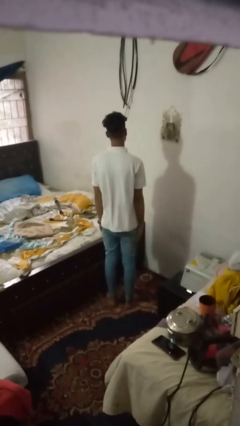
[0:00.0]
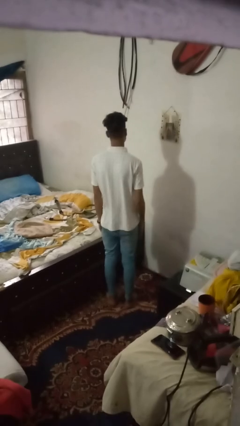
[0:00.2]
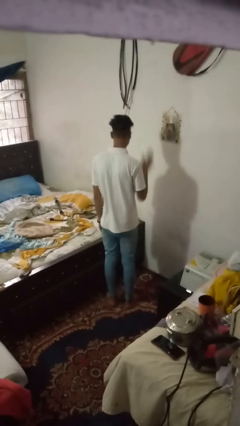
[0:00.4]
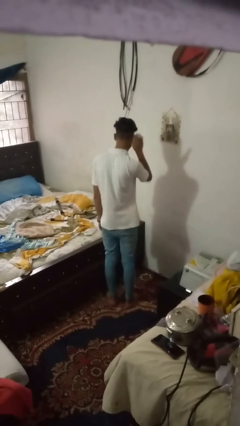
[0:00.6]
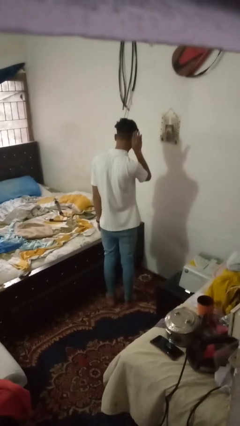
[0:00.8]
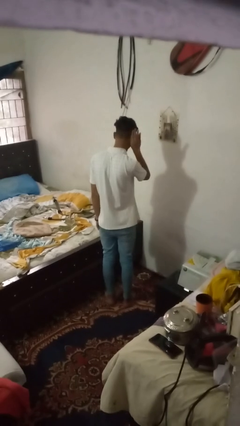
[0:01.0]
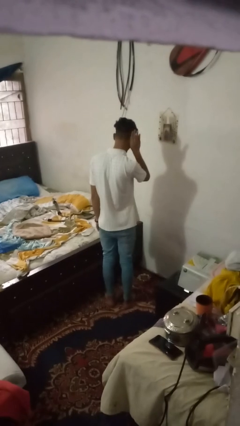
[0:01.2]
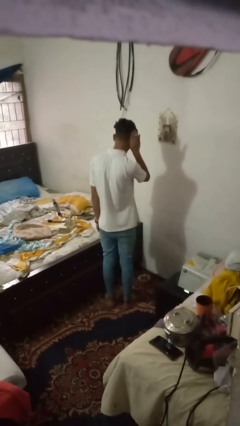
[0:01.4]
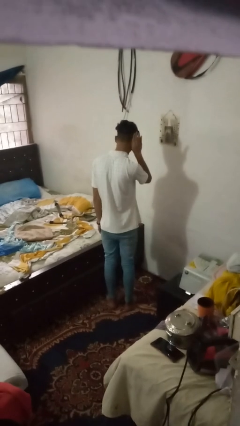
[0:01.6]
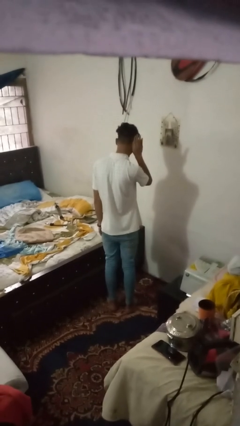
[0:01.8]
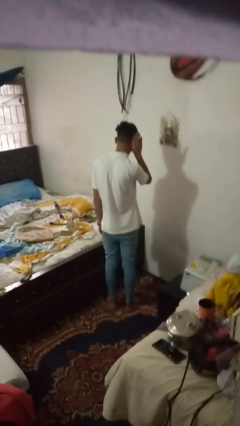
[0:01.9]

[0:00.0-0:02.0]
person gestures listen closely

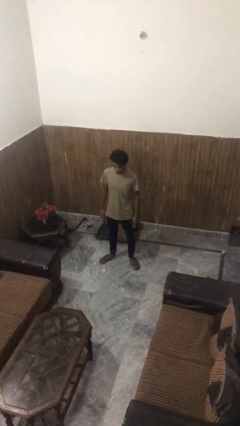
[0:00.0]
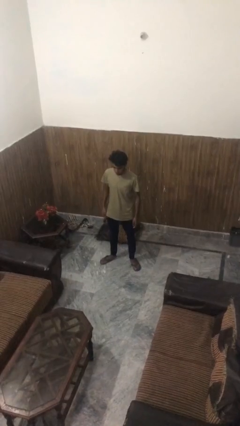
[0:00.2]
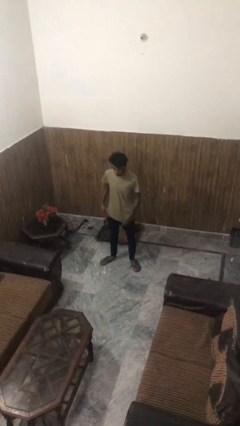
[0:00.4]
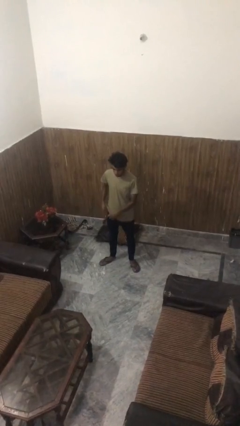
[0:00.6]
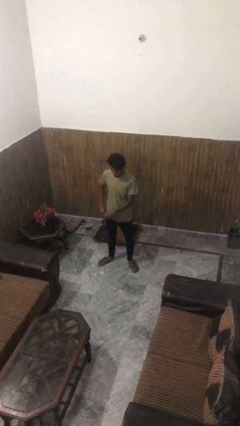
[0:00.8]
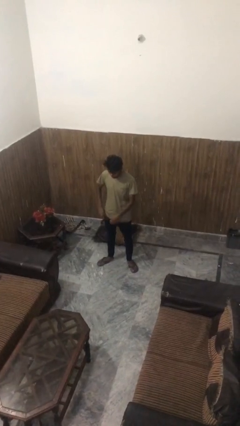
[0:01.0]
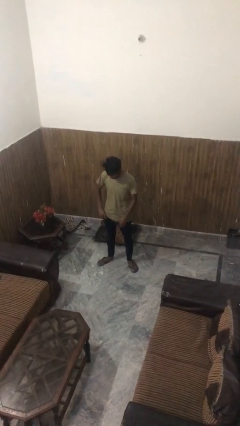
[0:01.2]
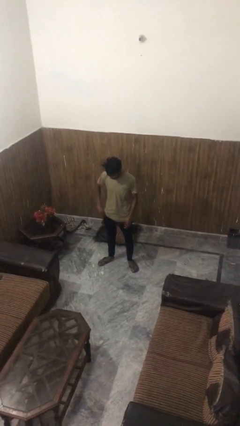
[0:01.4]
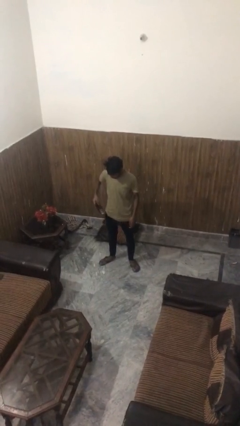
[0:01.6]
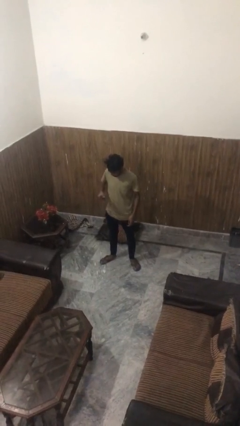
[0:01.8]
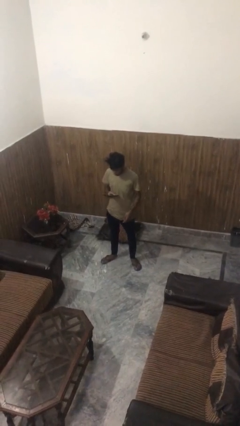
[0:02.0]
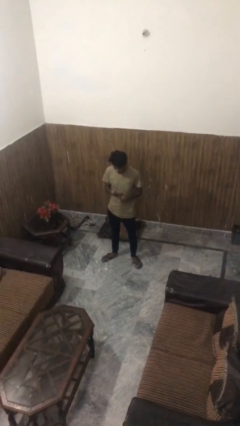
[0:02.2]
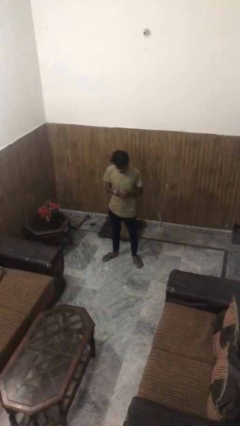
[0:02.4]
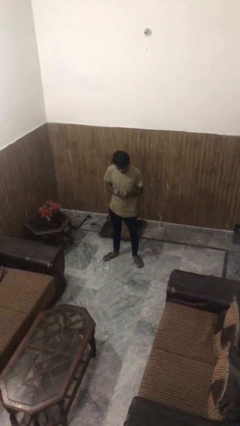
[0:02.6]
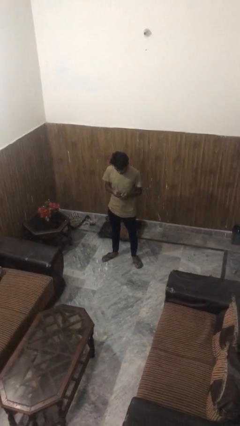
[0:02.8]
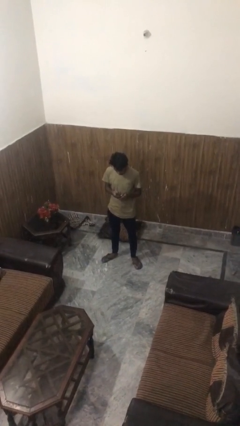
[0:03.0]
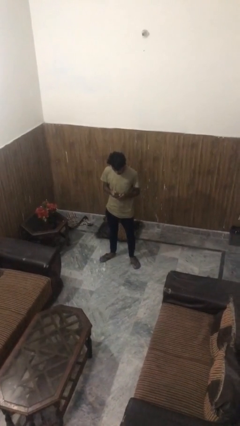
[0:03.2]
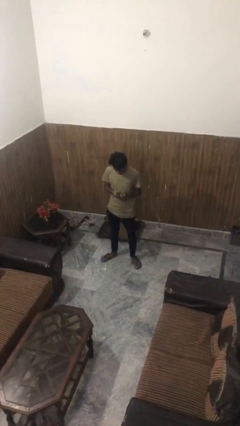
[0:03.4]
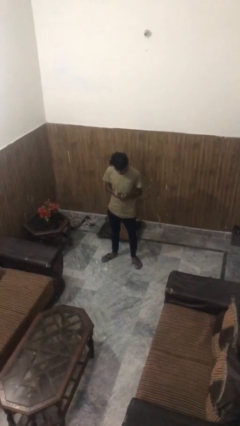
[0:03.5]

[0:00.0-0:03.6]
person takes phone from pocket

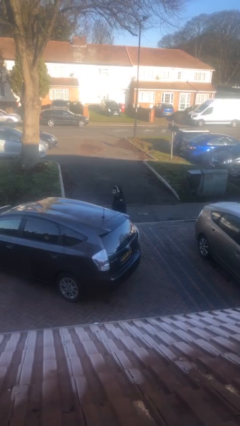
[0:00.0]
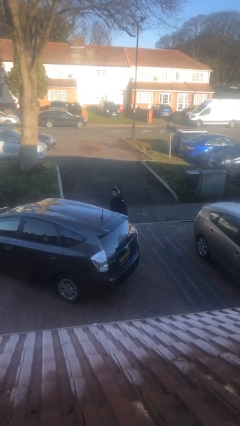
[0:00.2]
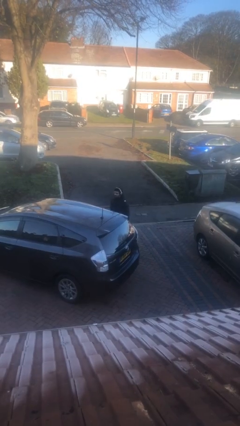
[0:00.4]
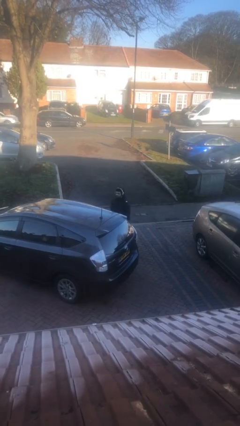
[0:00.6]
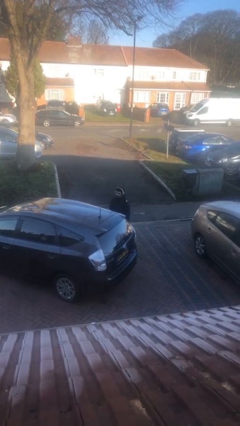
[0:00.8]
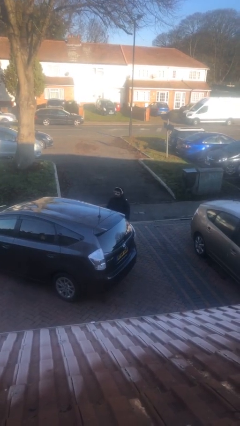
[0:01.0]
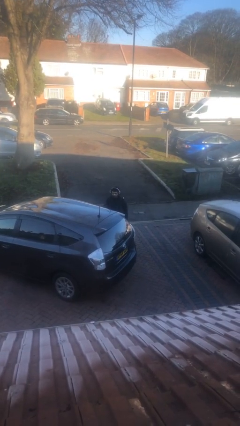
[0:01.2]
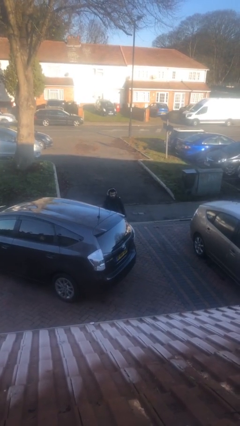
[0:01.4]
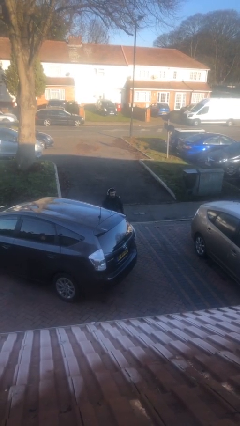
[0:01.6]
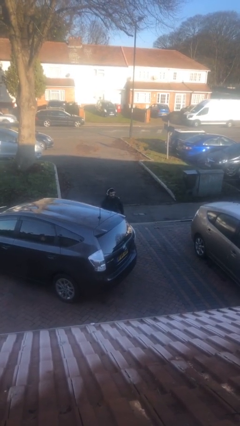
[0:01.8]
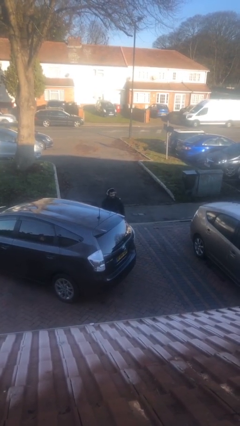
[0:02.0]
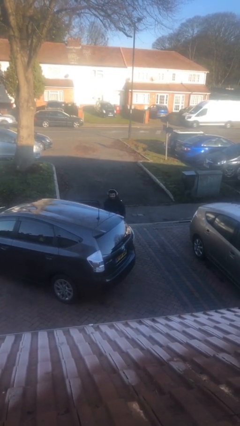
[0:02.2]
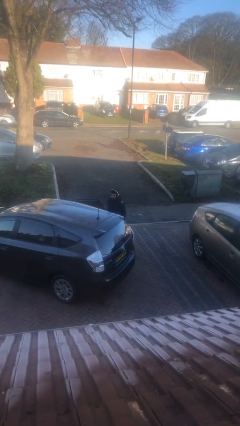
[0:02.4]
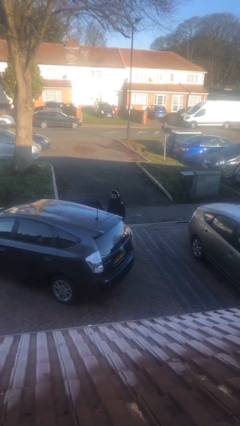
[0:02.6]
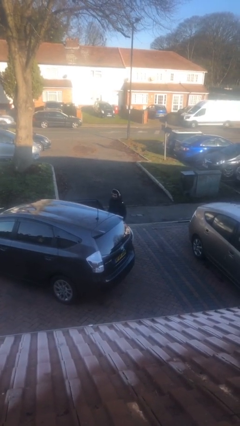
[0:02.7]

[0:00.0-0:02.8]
person opens car door

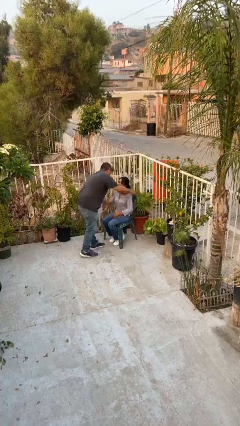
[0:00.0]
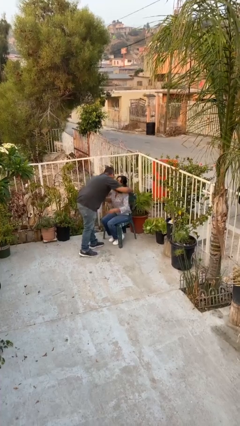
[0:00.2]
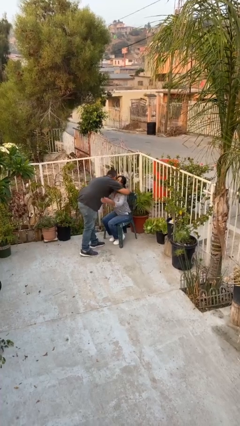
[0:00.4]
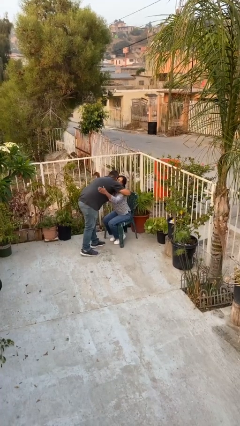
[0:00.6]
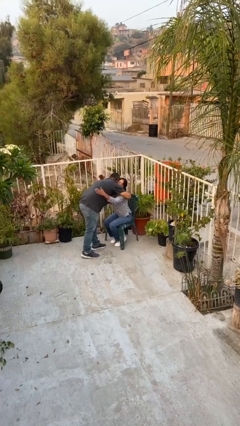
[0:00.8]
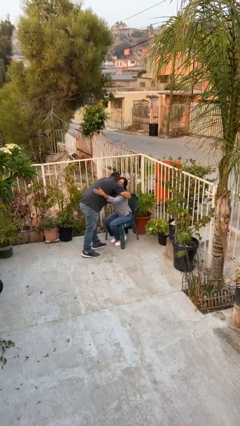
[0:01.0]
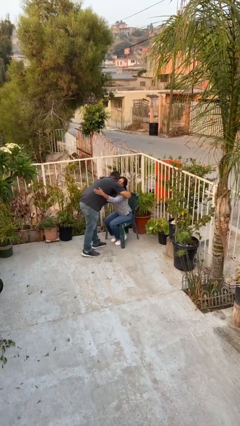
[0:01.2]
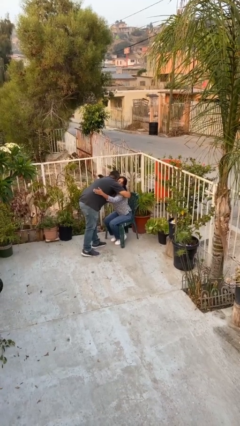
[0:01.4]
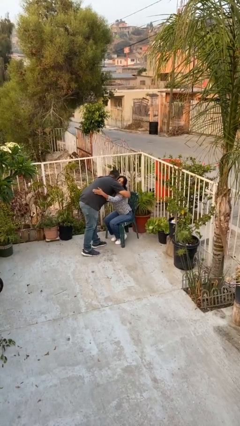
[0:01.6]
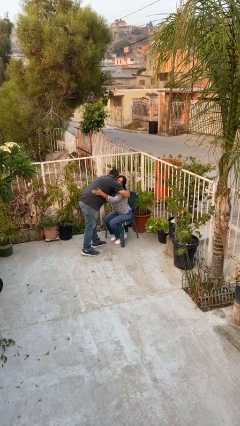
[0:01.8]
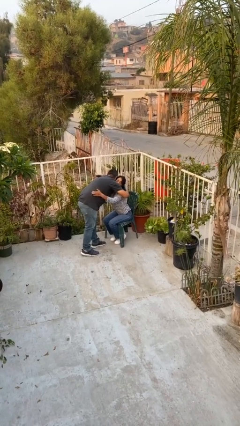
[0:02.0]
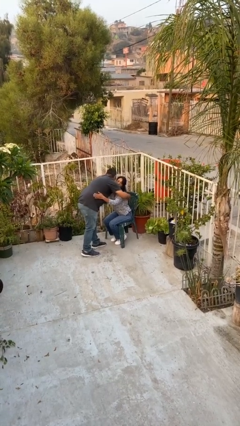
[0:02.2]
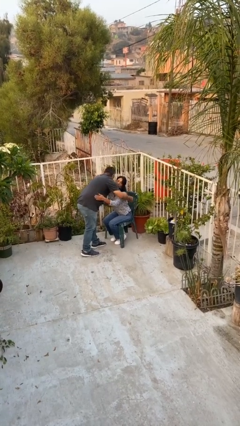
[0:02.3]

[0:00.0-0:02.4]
person embraces person

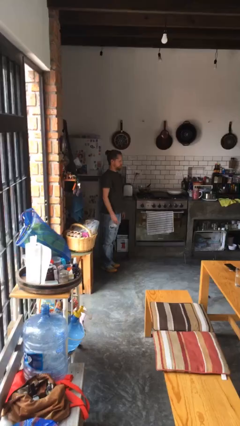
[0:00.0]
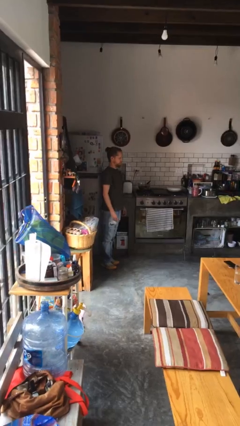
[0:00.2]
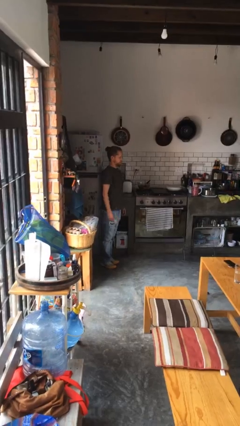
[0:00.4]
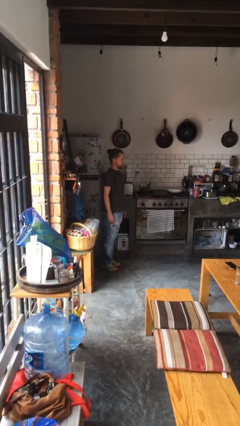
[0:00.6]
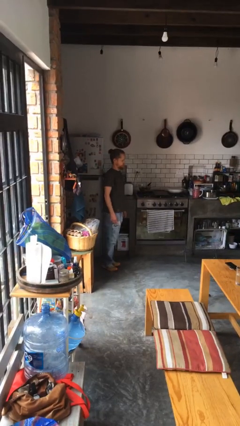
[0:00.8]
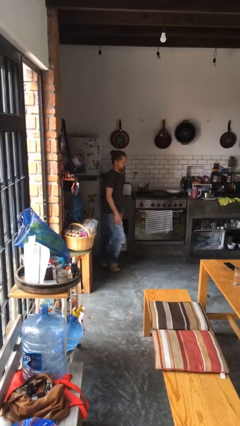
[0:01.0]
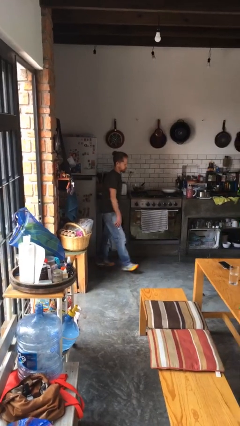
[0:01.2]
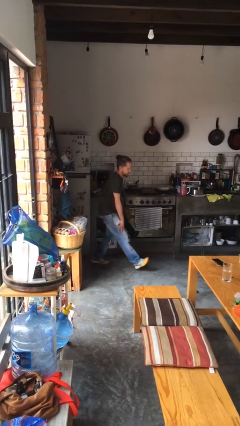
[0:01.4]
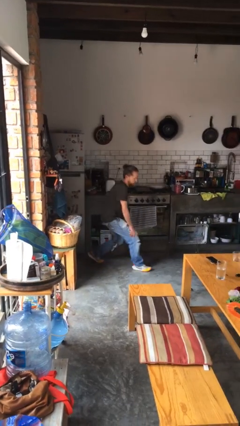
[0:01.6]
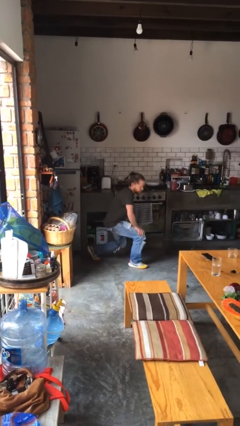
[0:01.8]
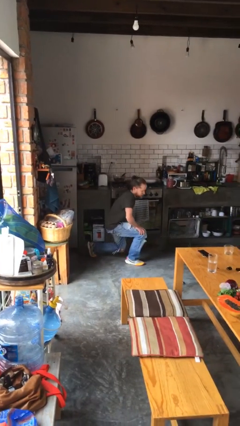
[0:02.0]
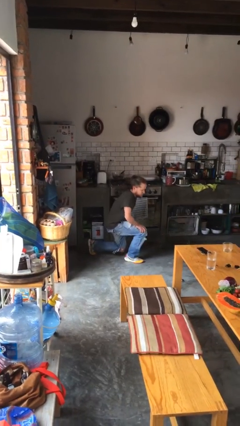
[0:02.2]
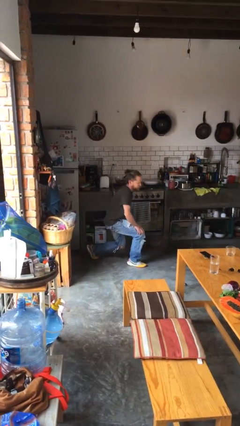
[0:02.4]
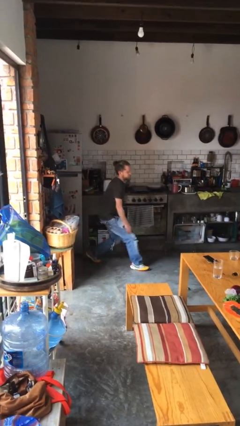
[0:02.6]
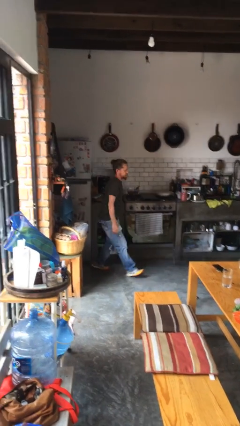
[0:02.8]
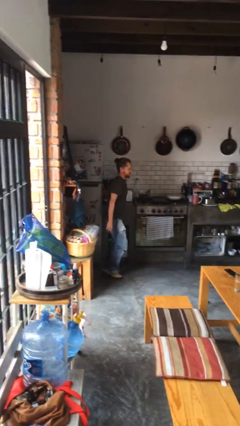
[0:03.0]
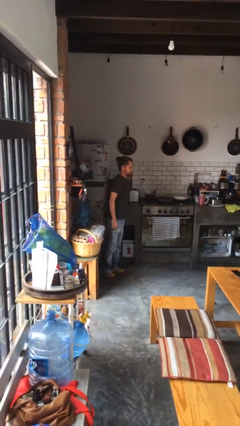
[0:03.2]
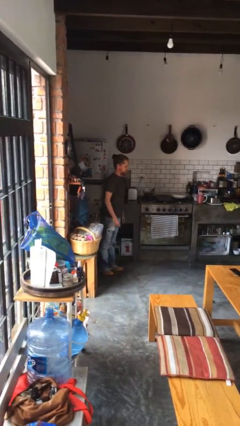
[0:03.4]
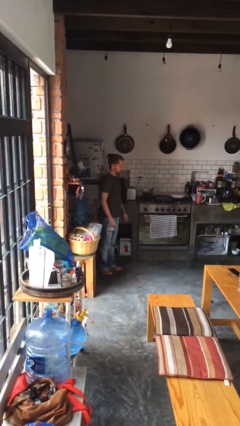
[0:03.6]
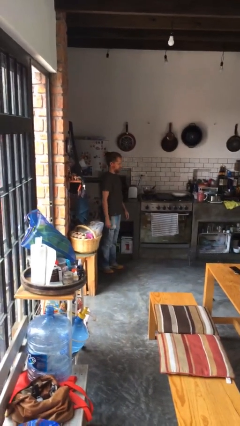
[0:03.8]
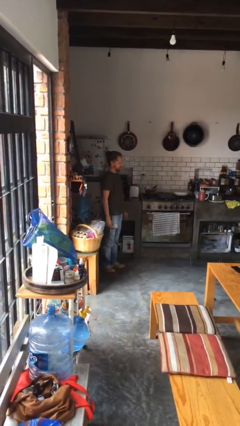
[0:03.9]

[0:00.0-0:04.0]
person exercises with lunges

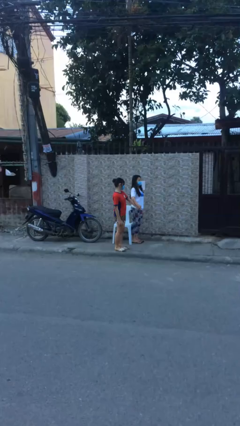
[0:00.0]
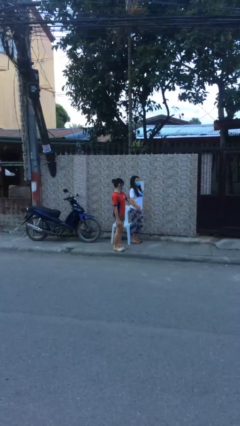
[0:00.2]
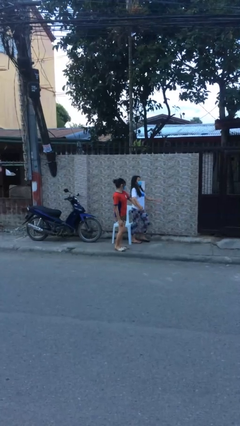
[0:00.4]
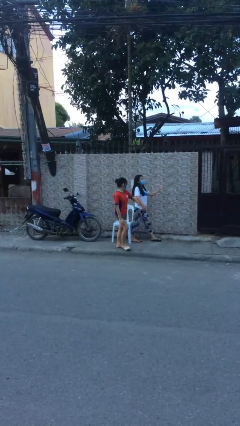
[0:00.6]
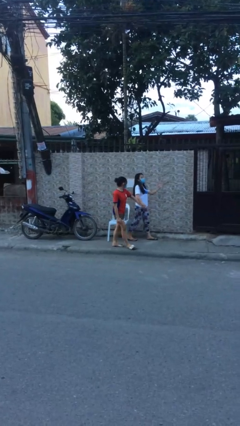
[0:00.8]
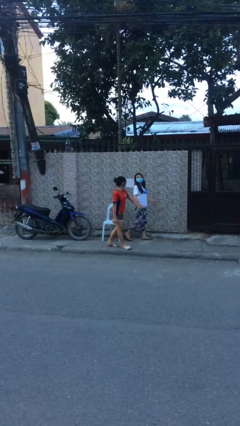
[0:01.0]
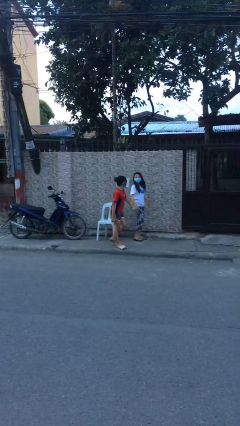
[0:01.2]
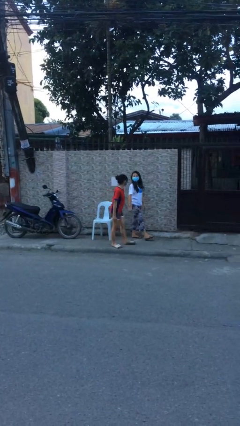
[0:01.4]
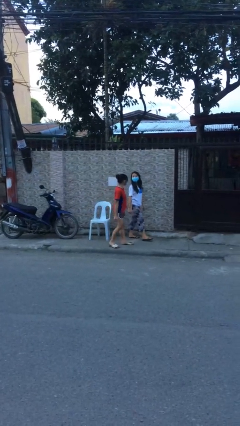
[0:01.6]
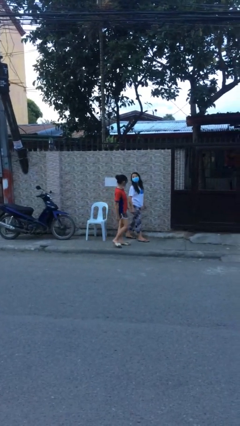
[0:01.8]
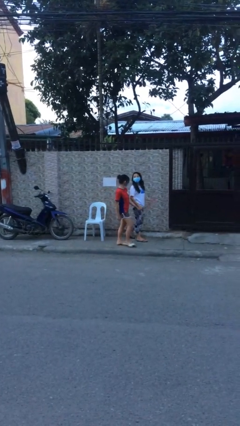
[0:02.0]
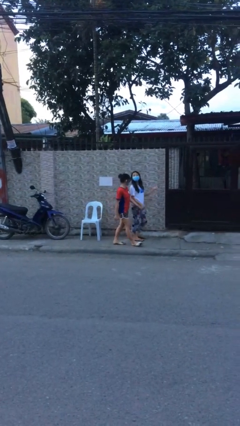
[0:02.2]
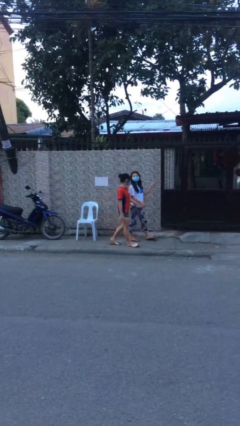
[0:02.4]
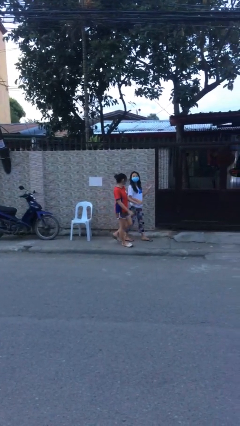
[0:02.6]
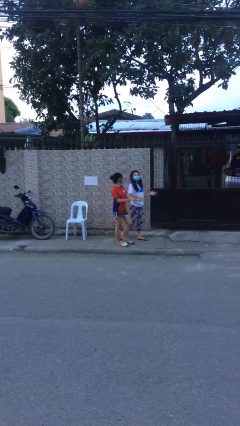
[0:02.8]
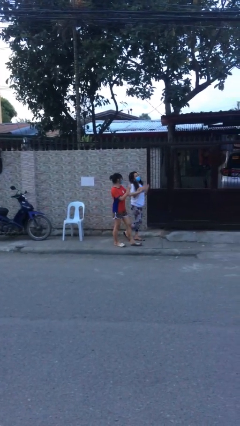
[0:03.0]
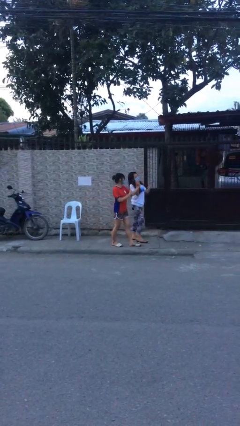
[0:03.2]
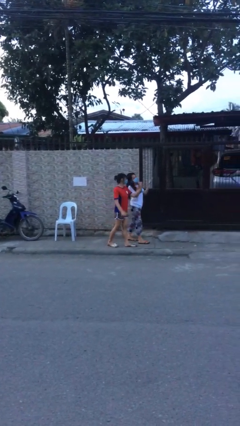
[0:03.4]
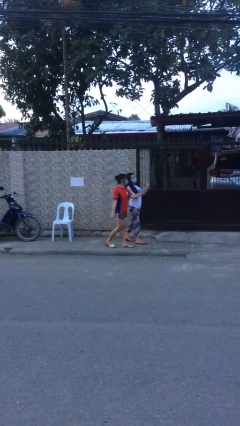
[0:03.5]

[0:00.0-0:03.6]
person holds hand
